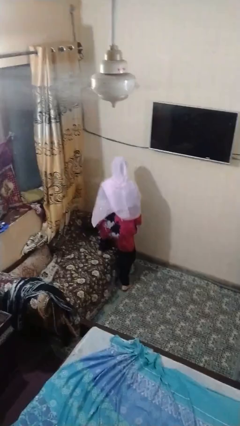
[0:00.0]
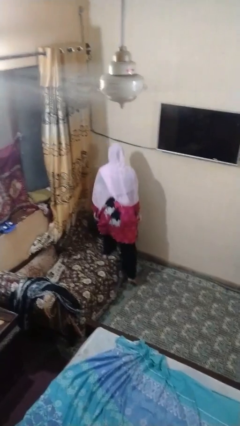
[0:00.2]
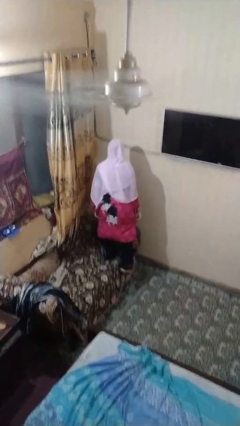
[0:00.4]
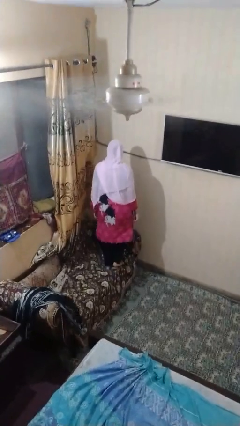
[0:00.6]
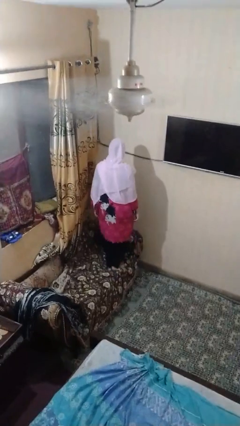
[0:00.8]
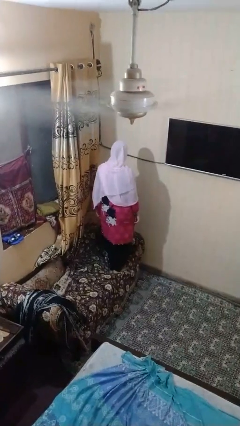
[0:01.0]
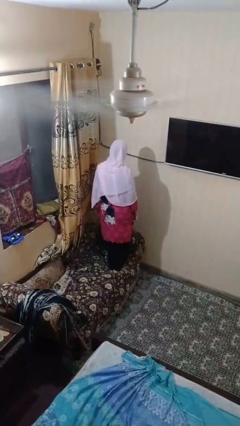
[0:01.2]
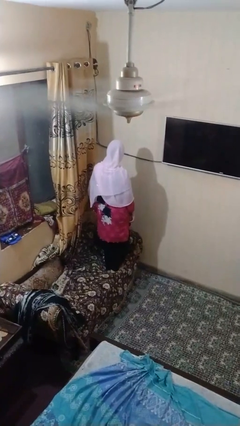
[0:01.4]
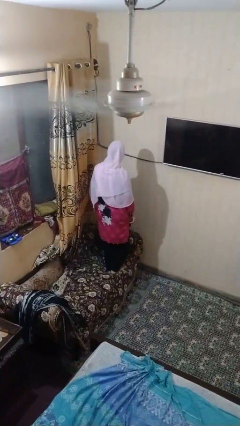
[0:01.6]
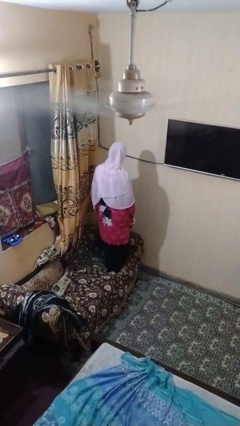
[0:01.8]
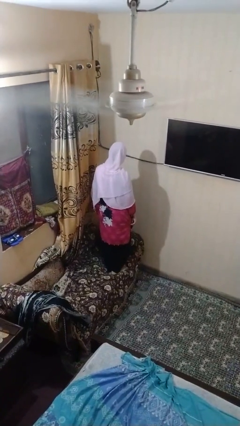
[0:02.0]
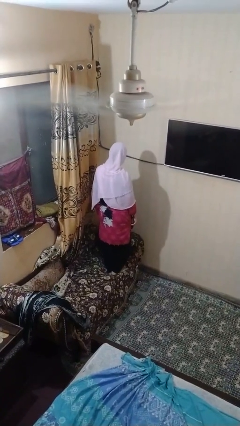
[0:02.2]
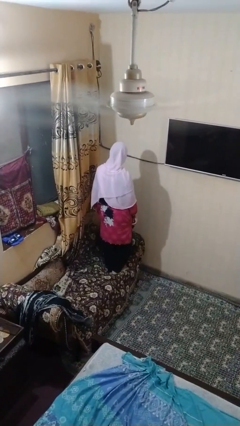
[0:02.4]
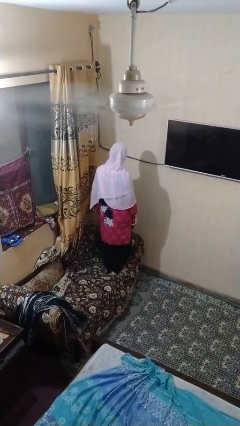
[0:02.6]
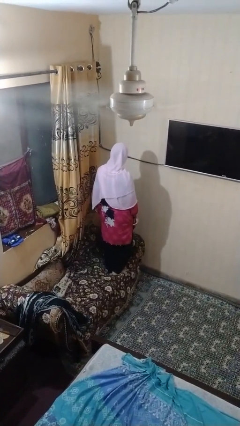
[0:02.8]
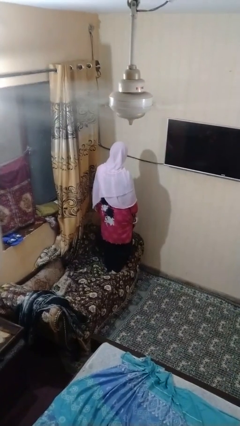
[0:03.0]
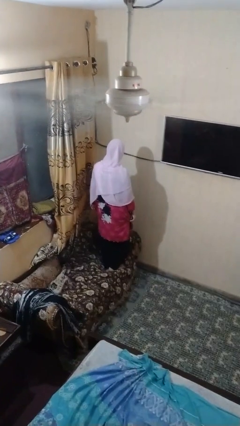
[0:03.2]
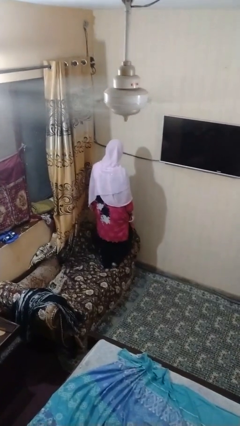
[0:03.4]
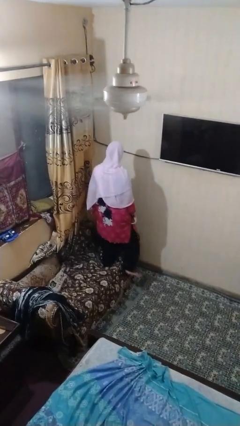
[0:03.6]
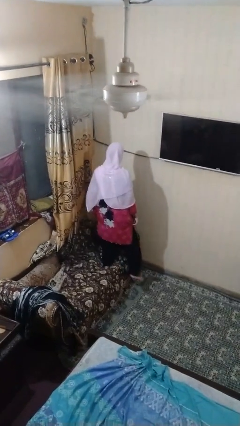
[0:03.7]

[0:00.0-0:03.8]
person climbs on couch
